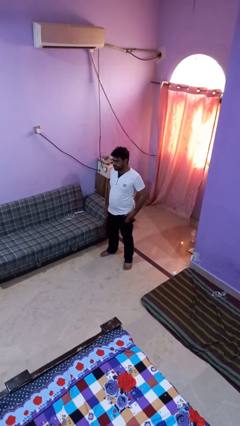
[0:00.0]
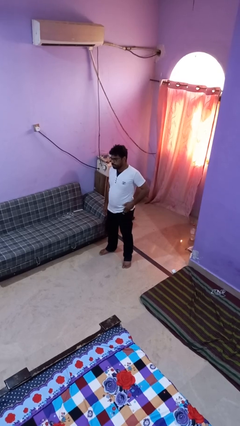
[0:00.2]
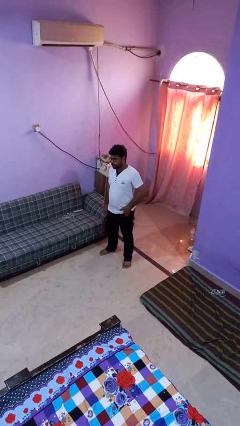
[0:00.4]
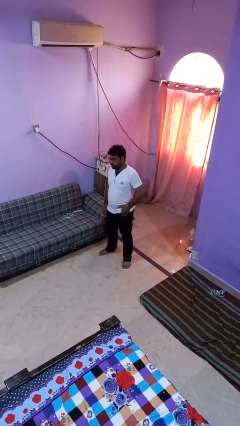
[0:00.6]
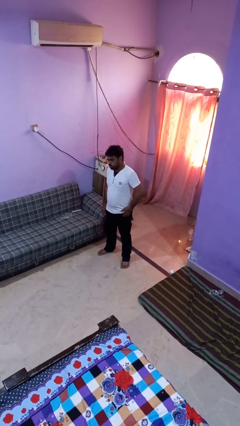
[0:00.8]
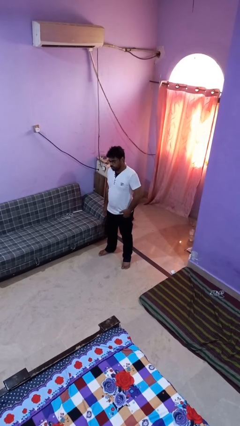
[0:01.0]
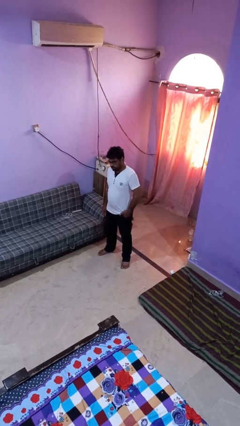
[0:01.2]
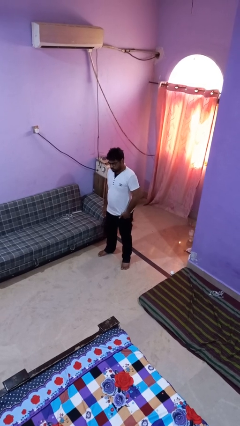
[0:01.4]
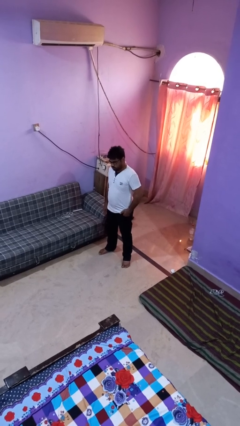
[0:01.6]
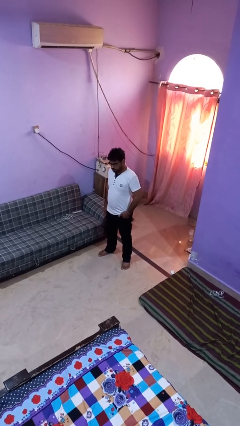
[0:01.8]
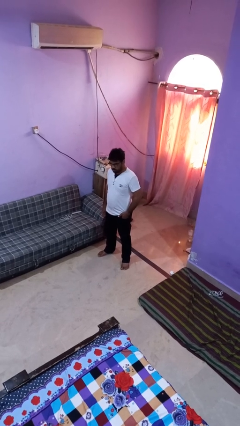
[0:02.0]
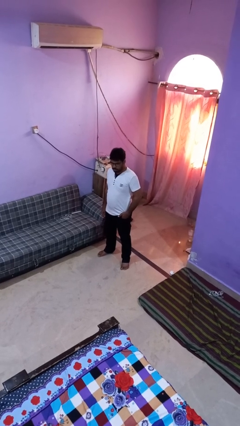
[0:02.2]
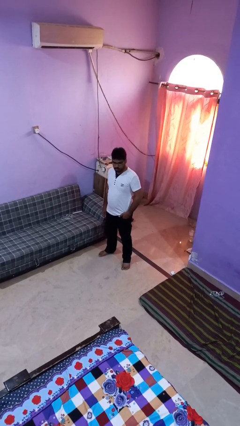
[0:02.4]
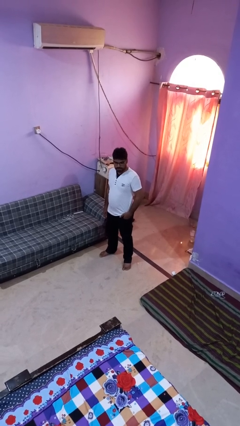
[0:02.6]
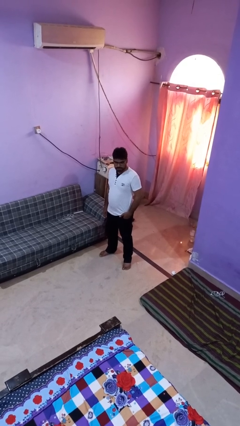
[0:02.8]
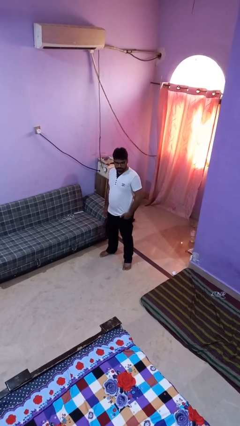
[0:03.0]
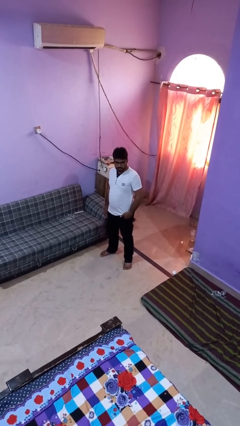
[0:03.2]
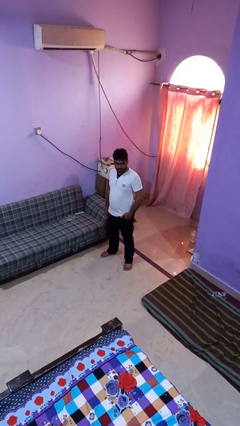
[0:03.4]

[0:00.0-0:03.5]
person puts hands in back pockets

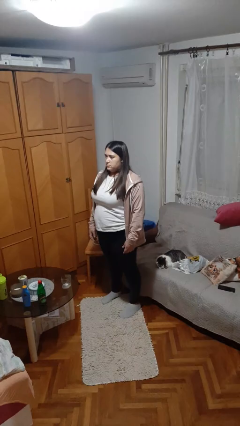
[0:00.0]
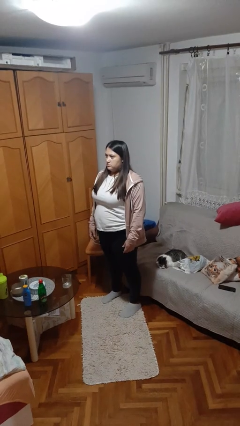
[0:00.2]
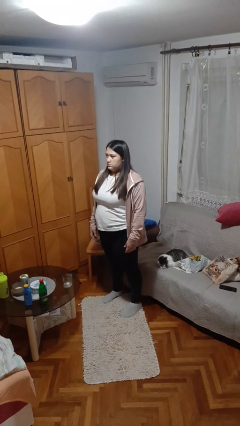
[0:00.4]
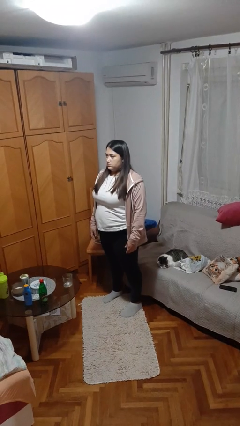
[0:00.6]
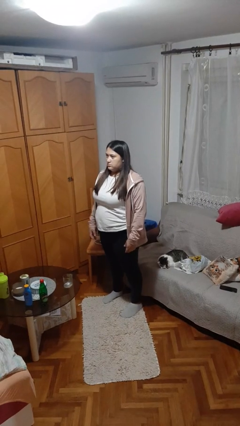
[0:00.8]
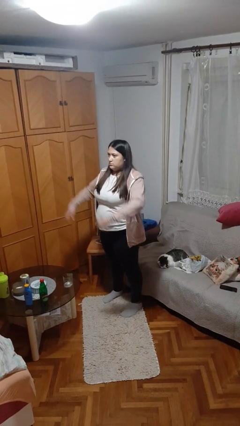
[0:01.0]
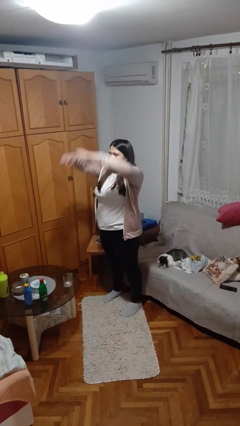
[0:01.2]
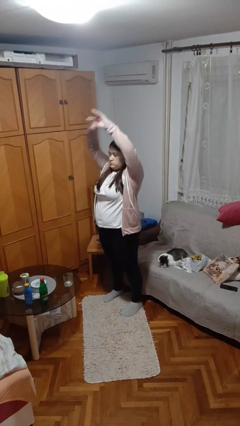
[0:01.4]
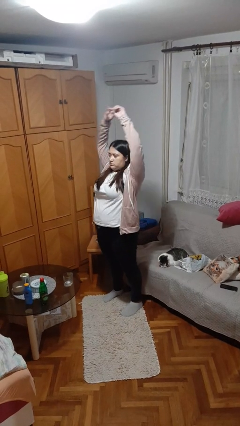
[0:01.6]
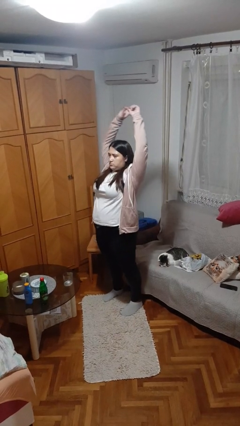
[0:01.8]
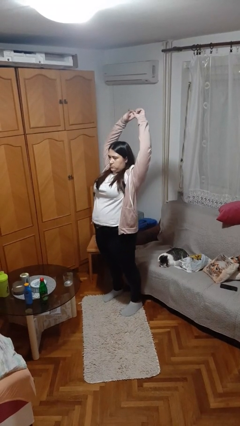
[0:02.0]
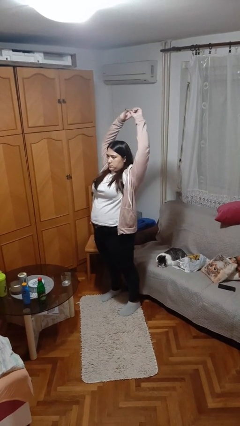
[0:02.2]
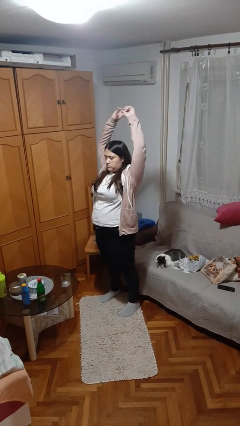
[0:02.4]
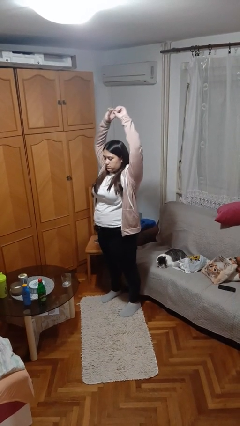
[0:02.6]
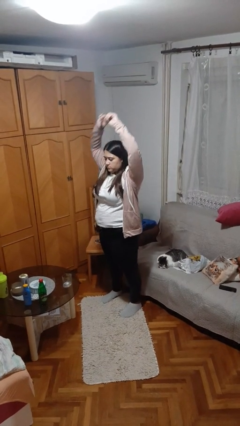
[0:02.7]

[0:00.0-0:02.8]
person stretches arms over head

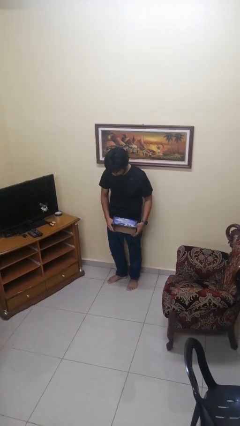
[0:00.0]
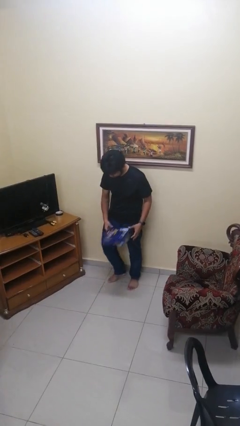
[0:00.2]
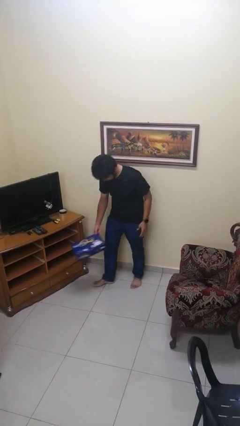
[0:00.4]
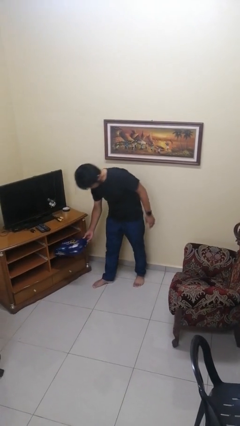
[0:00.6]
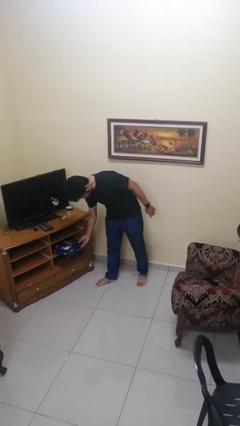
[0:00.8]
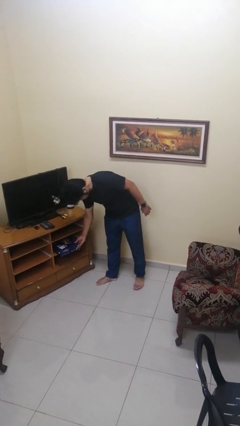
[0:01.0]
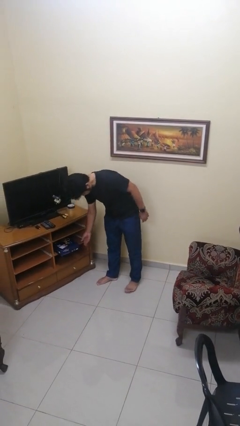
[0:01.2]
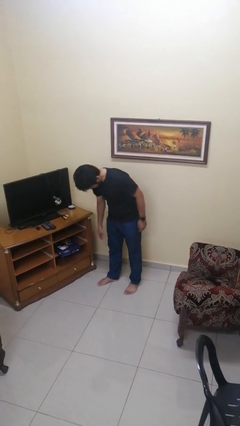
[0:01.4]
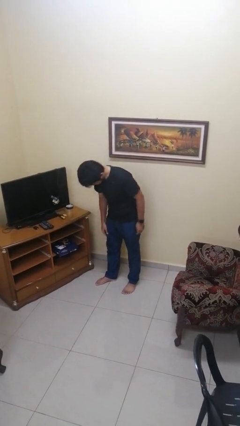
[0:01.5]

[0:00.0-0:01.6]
person puts down object into cabinet

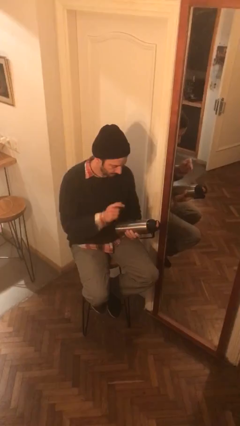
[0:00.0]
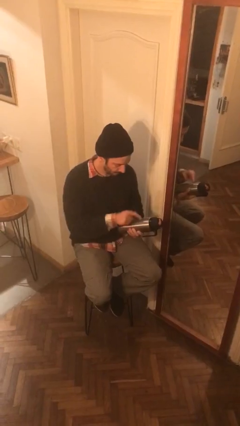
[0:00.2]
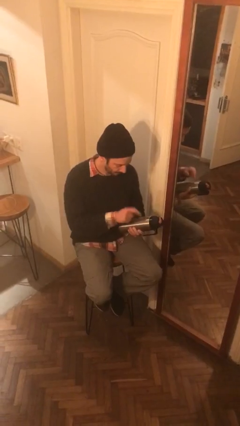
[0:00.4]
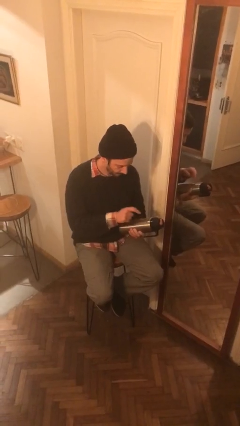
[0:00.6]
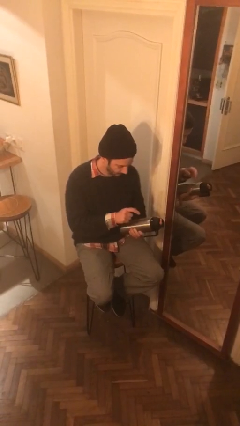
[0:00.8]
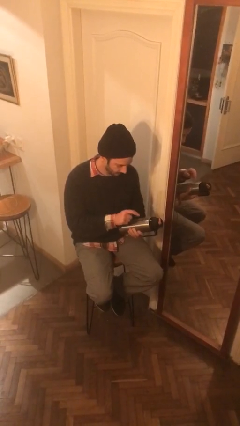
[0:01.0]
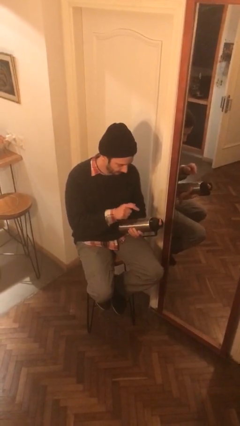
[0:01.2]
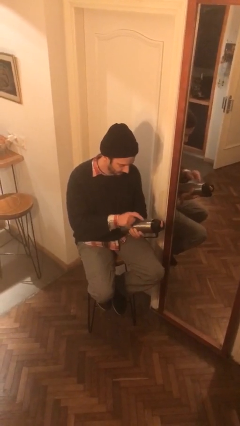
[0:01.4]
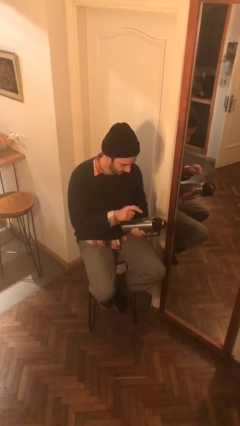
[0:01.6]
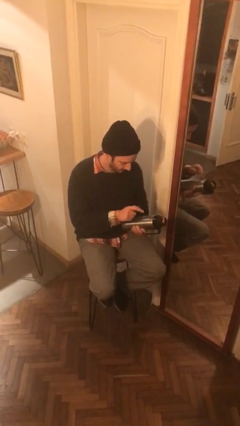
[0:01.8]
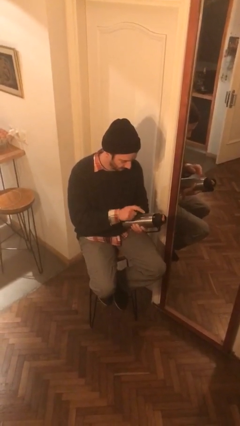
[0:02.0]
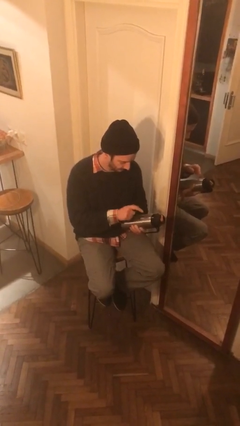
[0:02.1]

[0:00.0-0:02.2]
person taps object with finger

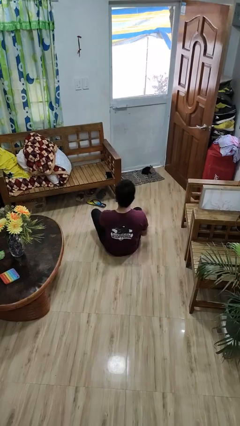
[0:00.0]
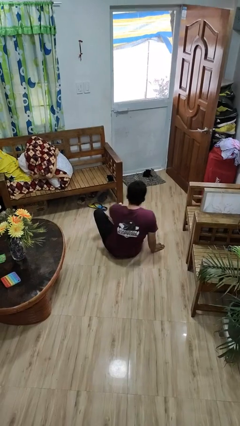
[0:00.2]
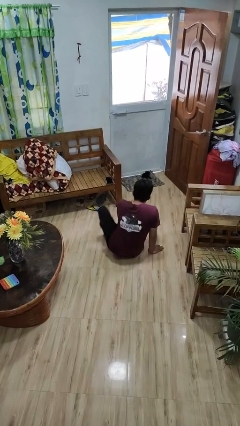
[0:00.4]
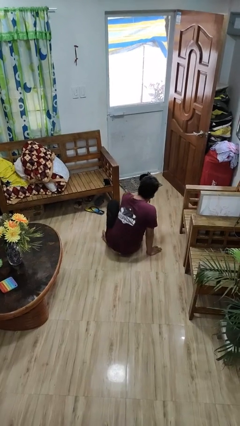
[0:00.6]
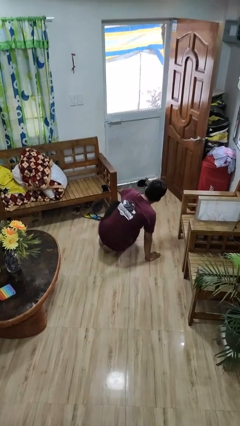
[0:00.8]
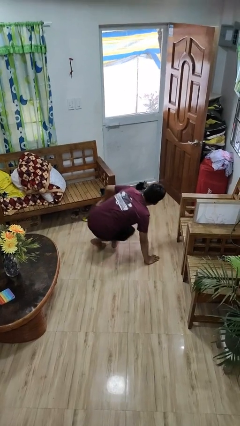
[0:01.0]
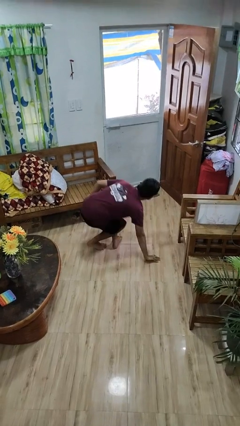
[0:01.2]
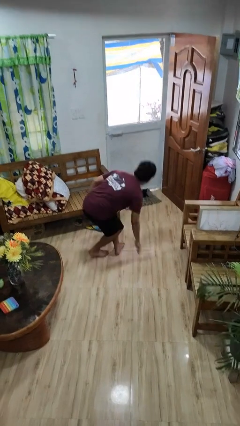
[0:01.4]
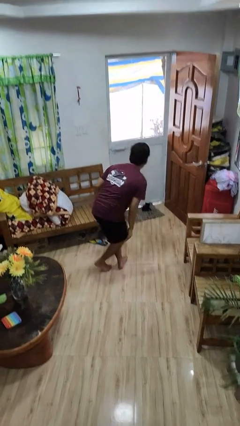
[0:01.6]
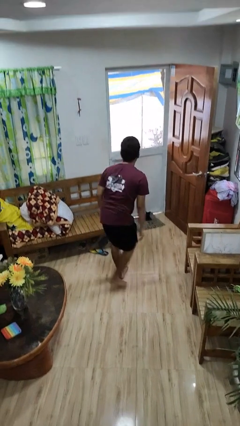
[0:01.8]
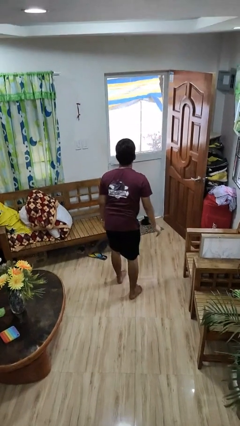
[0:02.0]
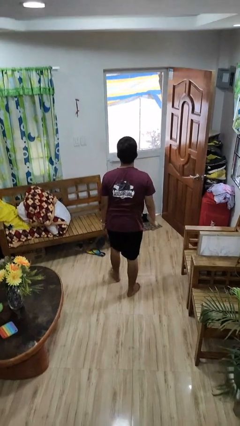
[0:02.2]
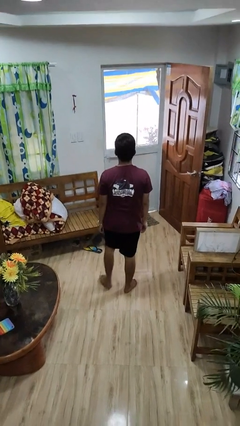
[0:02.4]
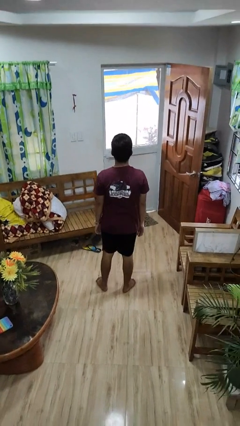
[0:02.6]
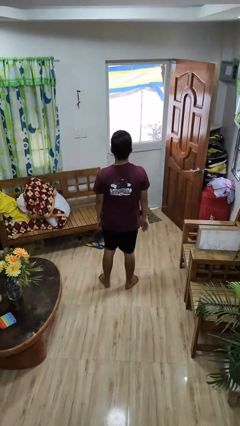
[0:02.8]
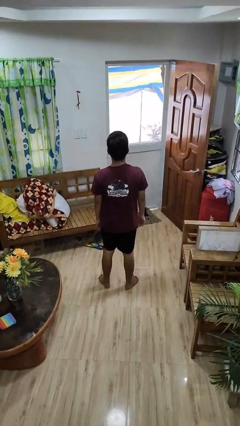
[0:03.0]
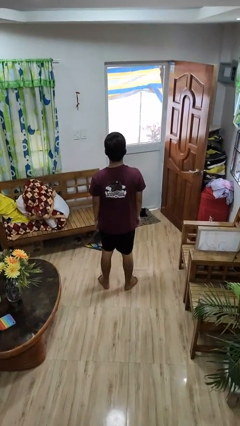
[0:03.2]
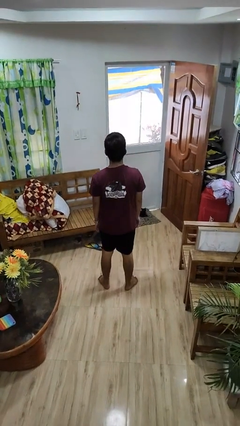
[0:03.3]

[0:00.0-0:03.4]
person stands up from floor

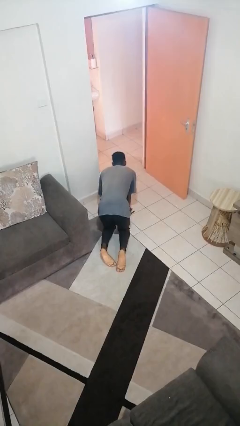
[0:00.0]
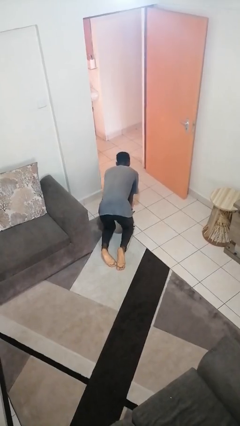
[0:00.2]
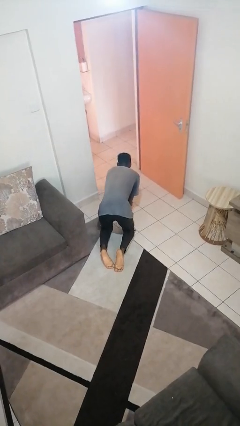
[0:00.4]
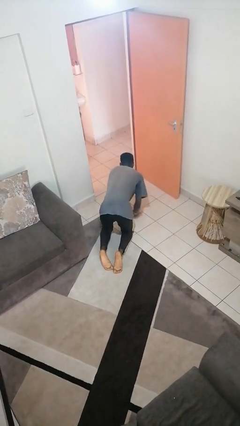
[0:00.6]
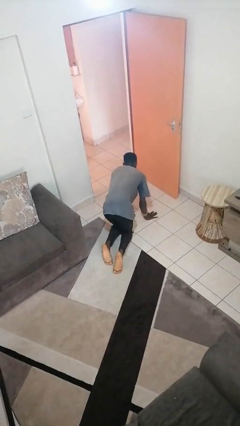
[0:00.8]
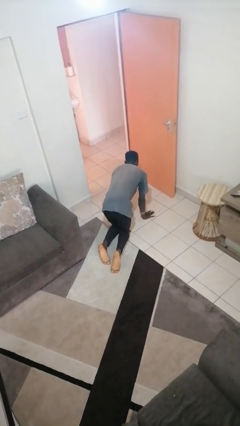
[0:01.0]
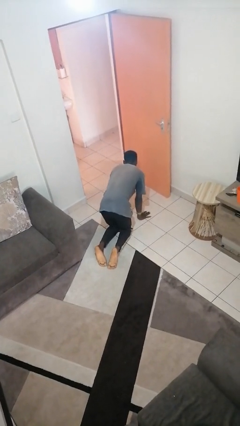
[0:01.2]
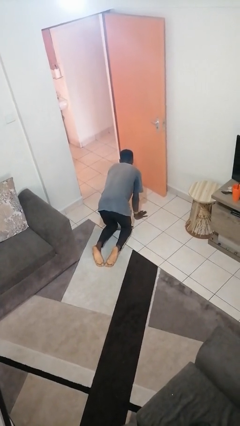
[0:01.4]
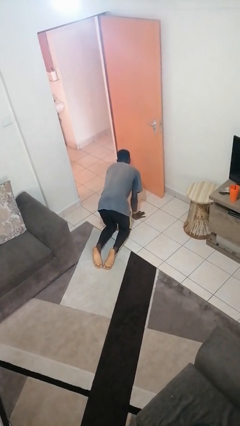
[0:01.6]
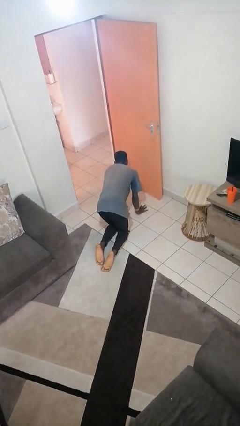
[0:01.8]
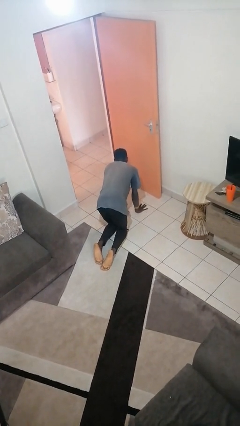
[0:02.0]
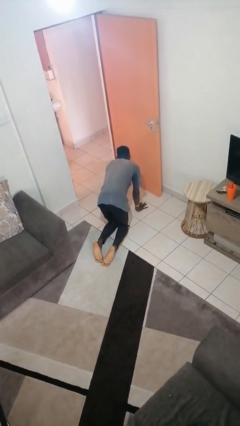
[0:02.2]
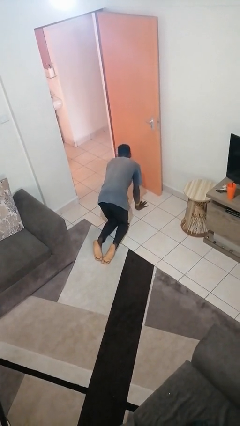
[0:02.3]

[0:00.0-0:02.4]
person crawls

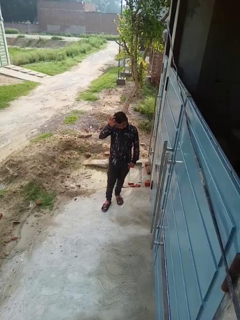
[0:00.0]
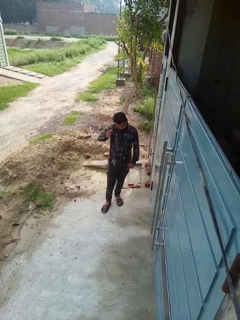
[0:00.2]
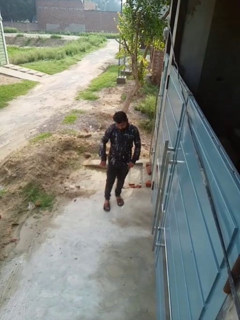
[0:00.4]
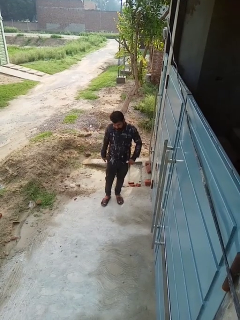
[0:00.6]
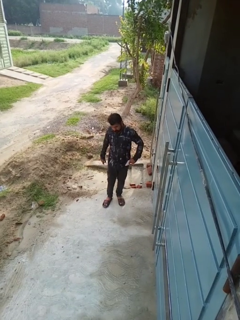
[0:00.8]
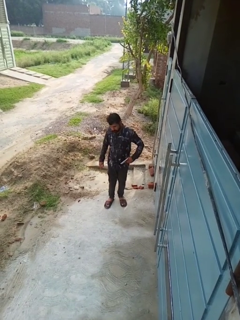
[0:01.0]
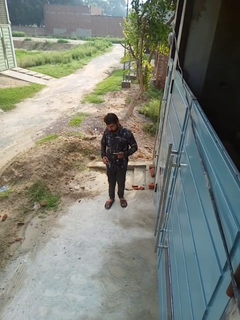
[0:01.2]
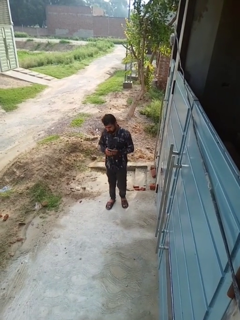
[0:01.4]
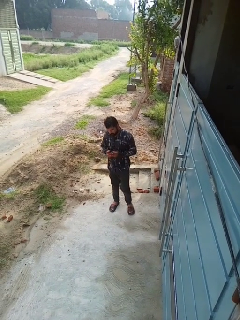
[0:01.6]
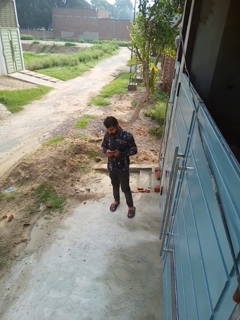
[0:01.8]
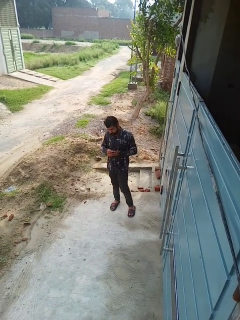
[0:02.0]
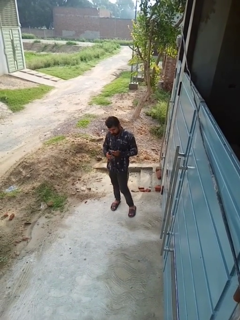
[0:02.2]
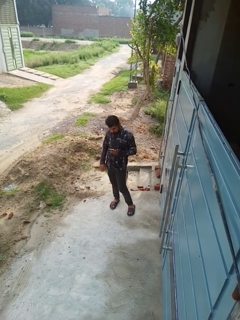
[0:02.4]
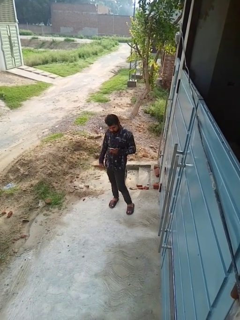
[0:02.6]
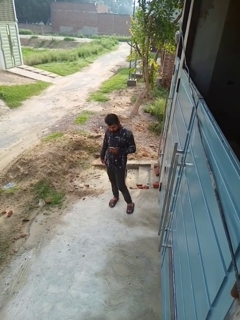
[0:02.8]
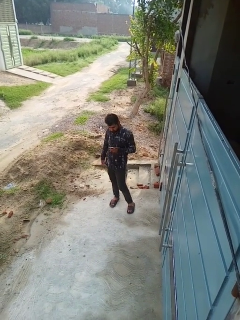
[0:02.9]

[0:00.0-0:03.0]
person takes phone from pocket
